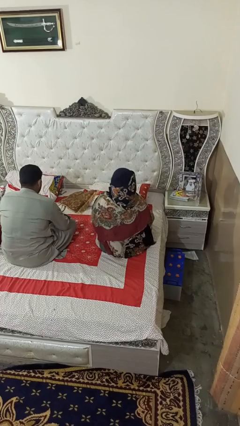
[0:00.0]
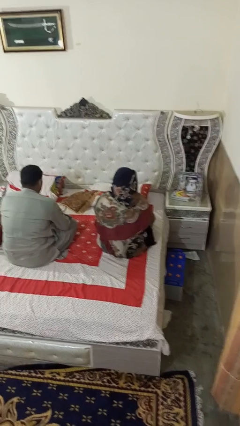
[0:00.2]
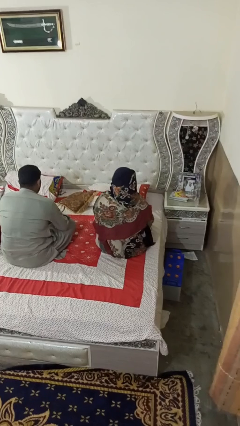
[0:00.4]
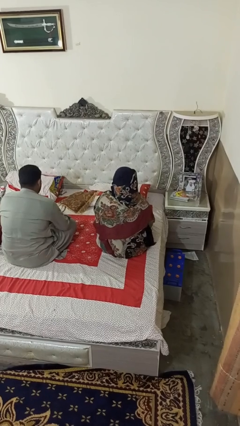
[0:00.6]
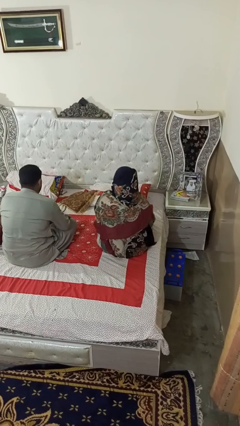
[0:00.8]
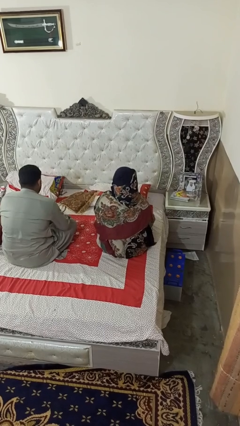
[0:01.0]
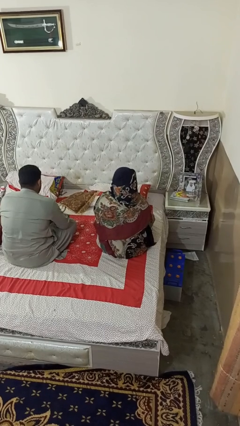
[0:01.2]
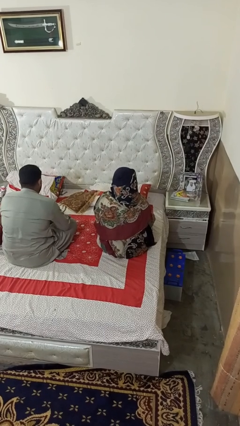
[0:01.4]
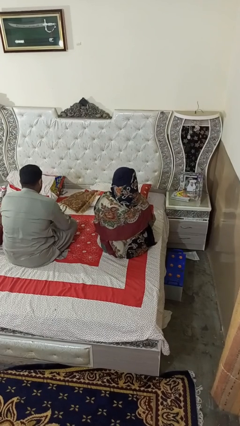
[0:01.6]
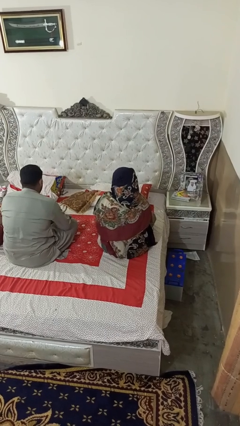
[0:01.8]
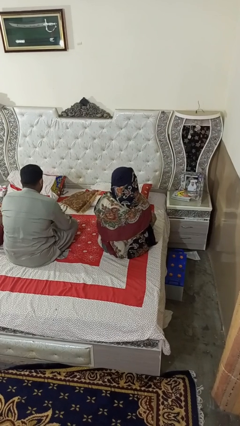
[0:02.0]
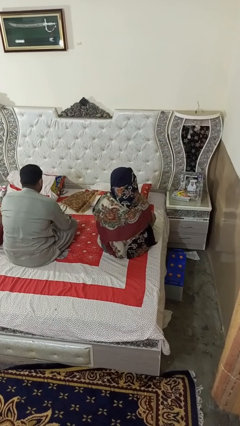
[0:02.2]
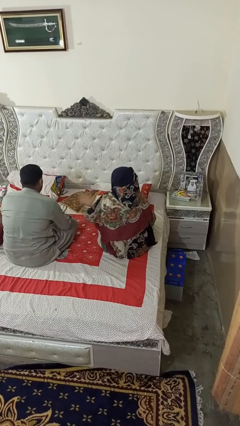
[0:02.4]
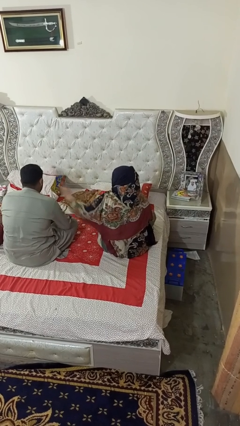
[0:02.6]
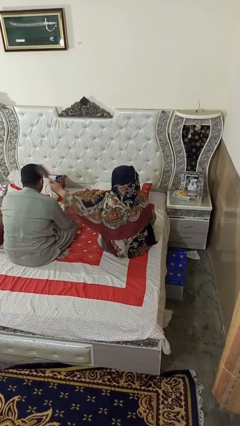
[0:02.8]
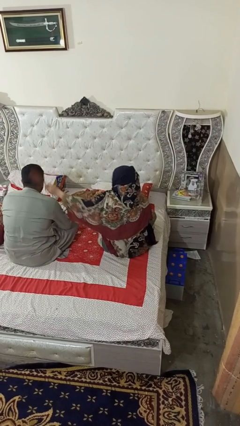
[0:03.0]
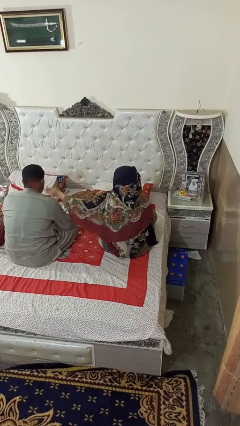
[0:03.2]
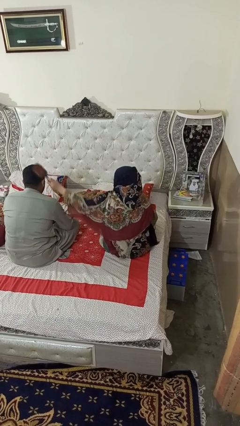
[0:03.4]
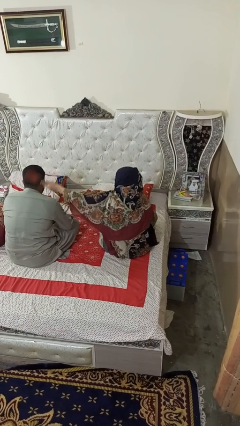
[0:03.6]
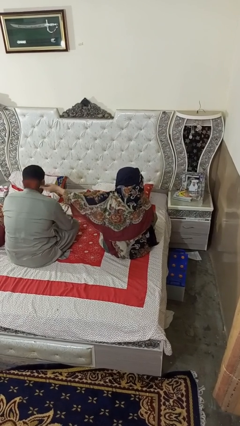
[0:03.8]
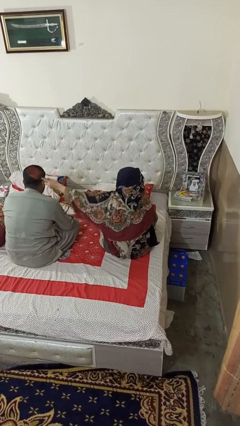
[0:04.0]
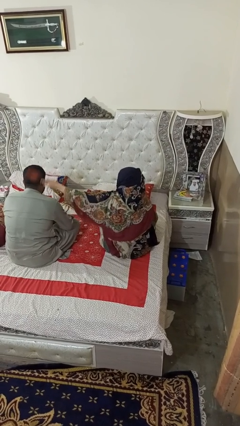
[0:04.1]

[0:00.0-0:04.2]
person brushes hair of person

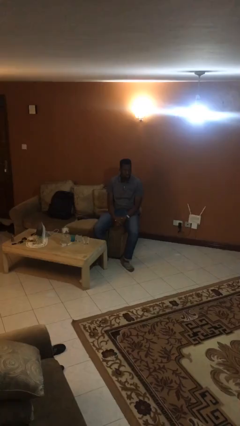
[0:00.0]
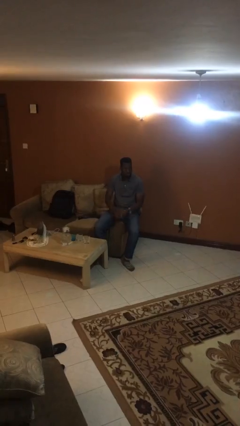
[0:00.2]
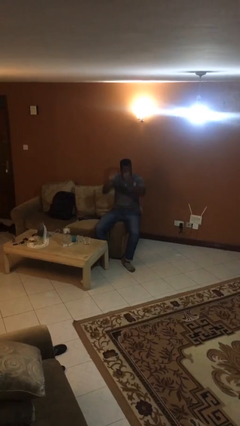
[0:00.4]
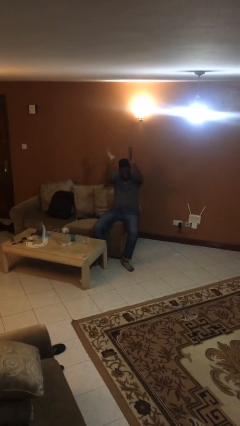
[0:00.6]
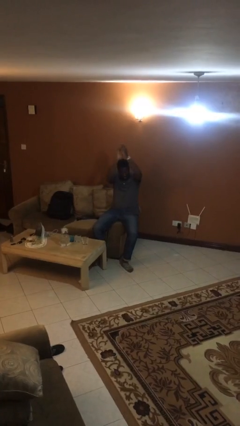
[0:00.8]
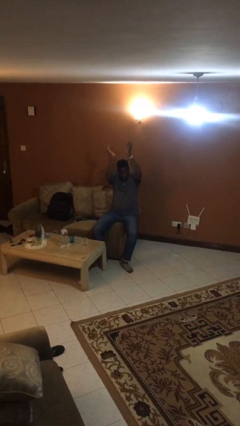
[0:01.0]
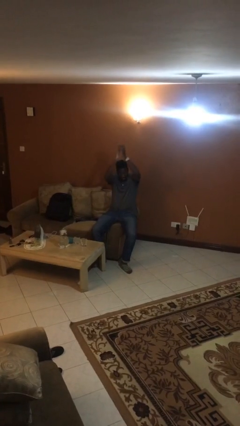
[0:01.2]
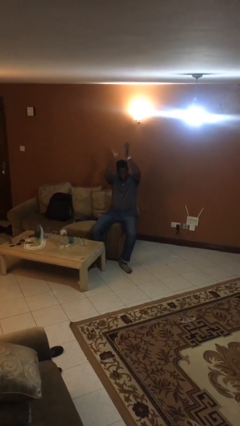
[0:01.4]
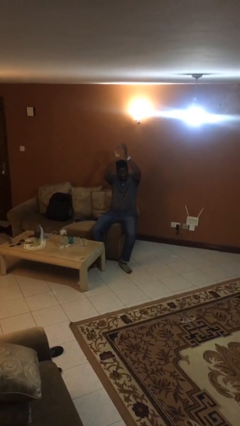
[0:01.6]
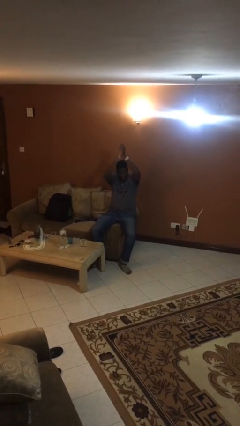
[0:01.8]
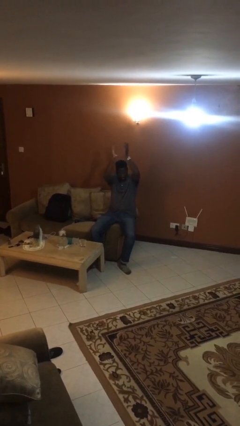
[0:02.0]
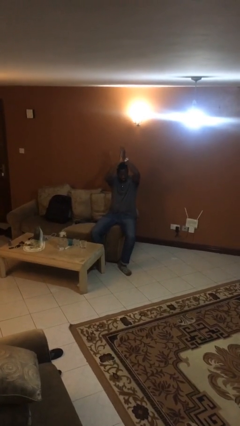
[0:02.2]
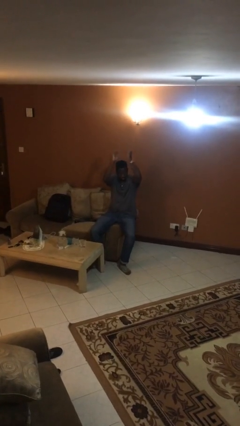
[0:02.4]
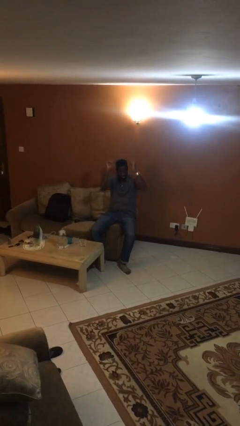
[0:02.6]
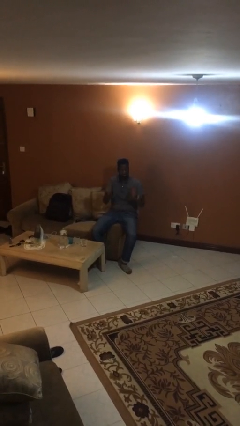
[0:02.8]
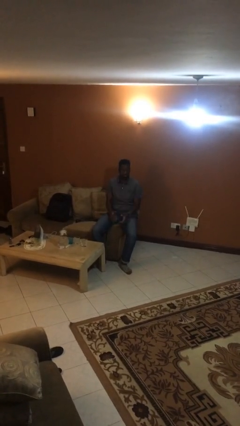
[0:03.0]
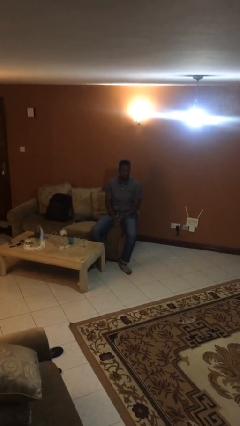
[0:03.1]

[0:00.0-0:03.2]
person claps hands

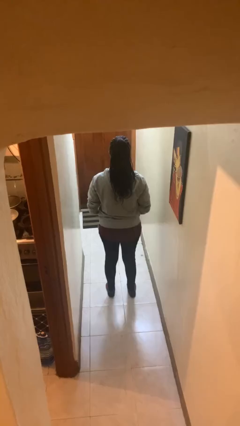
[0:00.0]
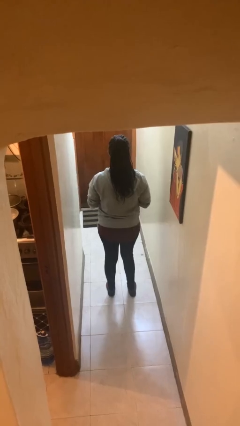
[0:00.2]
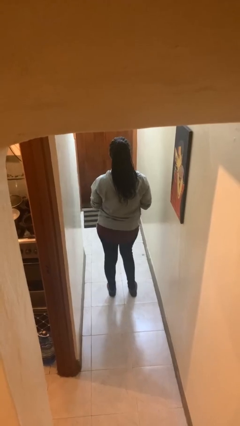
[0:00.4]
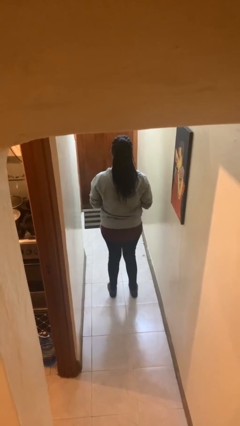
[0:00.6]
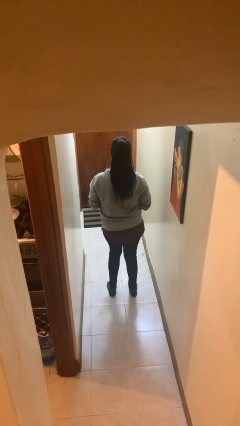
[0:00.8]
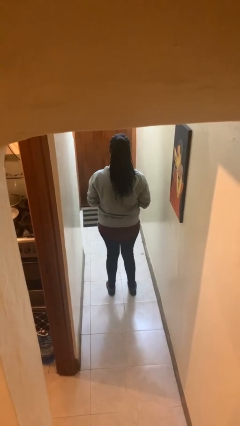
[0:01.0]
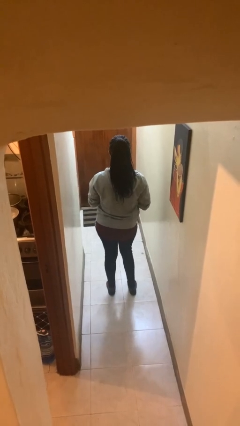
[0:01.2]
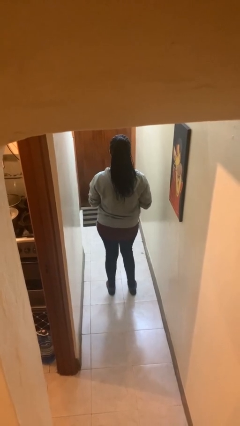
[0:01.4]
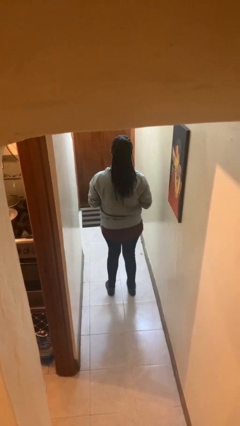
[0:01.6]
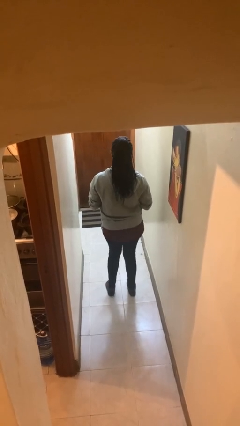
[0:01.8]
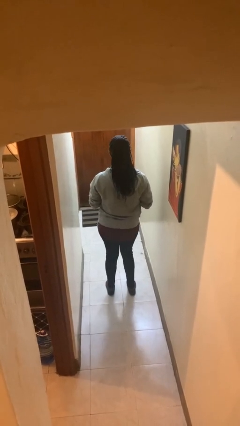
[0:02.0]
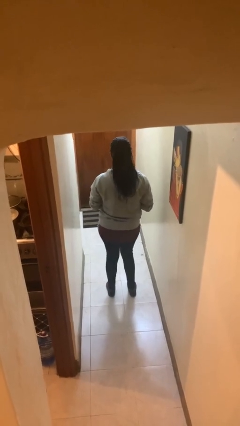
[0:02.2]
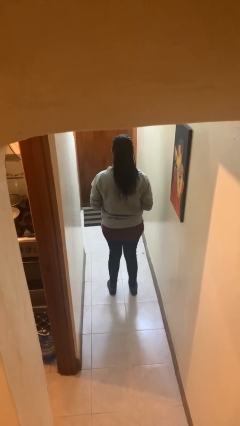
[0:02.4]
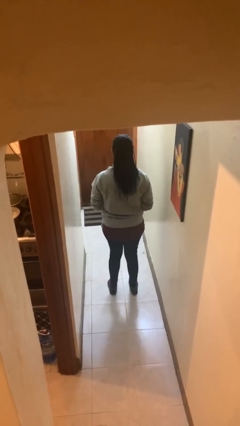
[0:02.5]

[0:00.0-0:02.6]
person wiggles hips

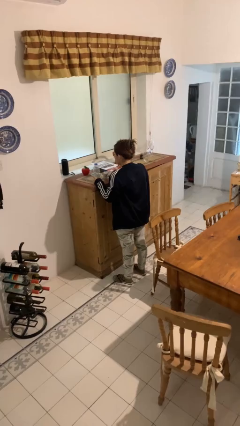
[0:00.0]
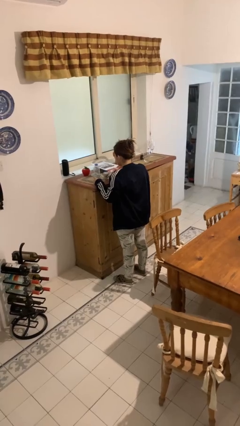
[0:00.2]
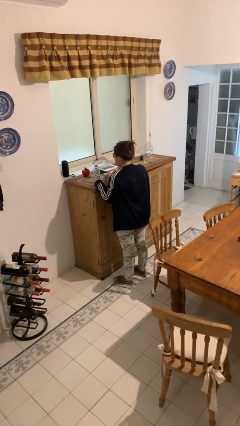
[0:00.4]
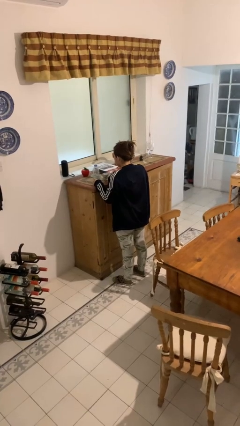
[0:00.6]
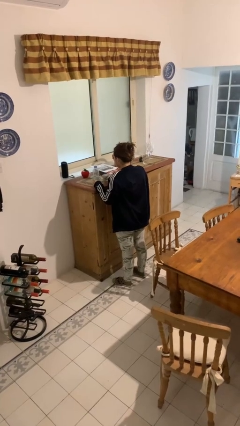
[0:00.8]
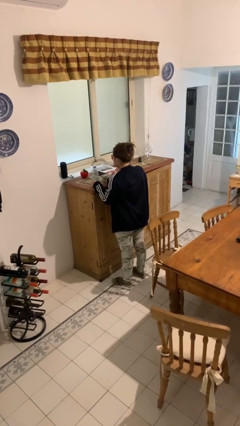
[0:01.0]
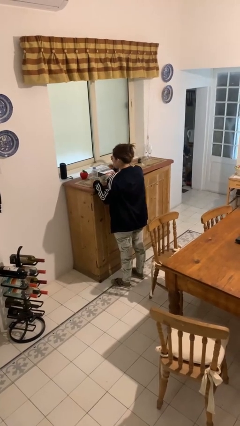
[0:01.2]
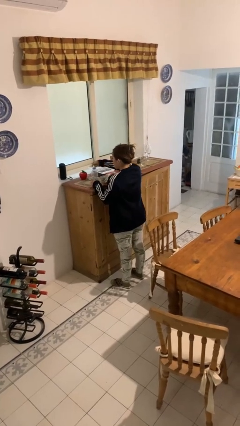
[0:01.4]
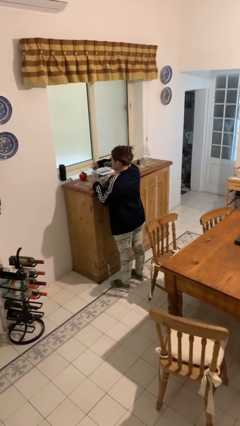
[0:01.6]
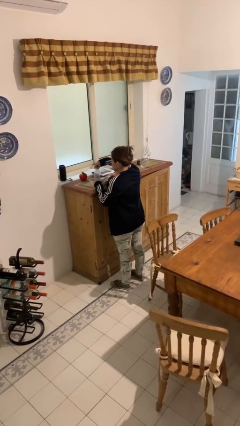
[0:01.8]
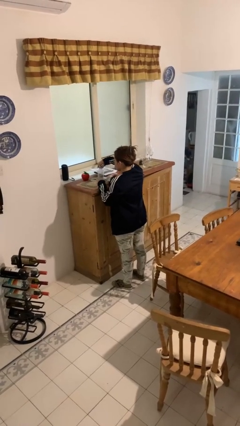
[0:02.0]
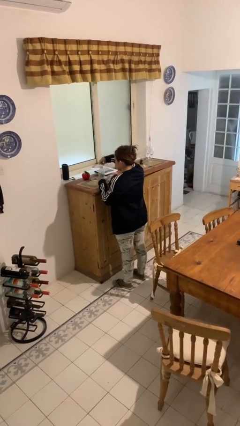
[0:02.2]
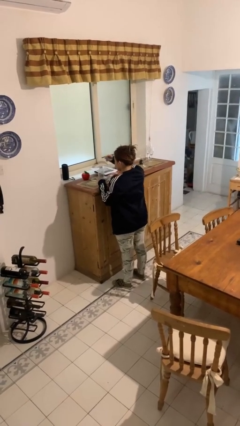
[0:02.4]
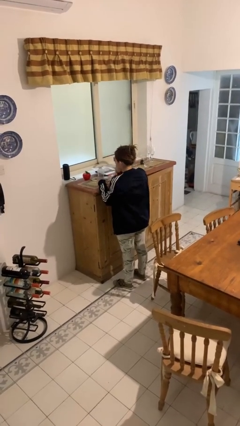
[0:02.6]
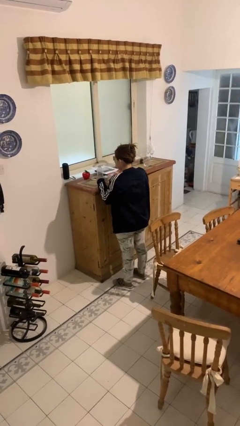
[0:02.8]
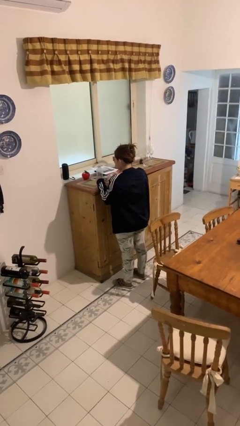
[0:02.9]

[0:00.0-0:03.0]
person unscrews lid from bottle

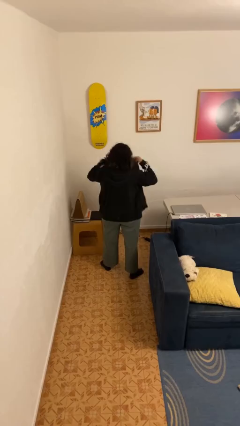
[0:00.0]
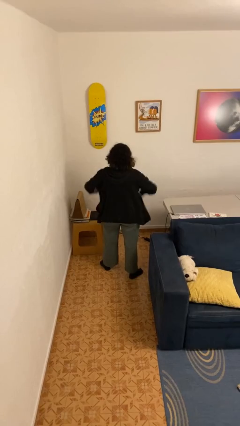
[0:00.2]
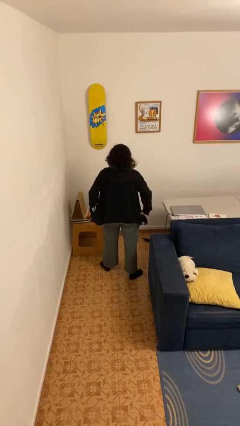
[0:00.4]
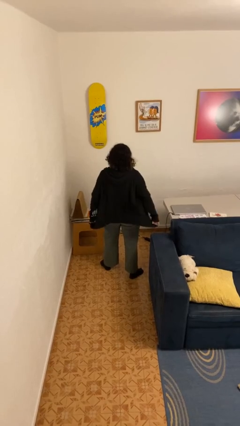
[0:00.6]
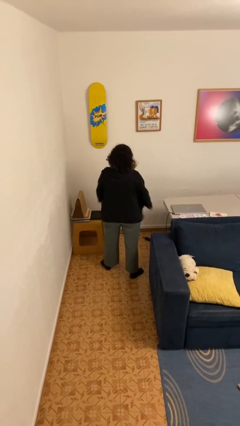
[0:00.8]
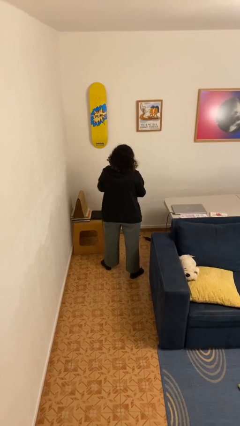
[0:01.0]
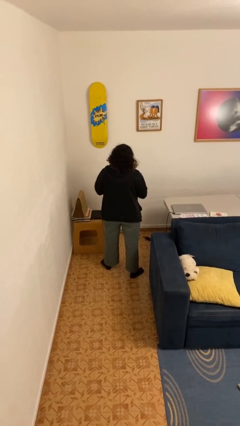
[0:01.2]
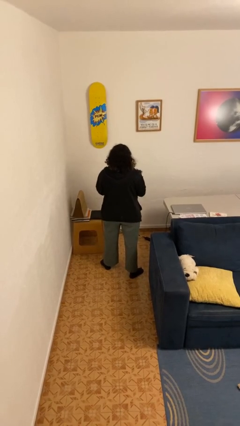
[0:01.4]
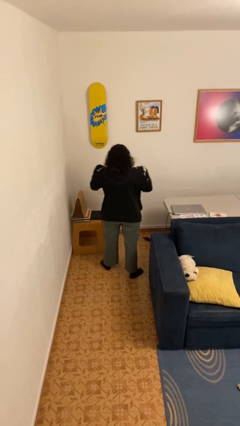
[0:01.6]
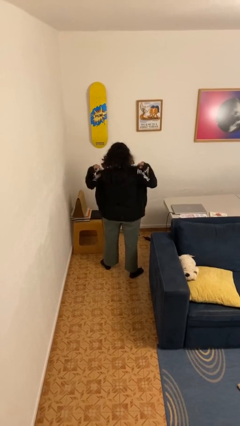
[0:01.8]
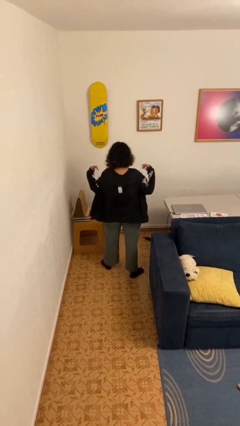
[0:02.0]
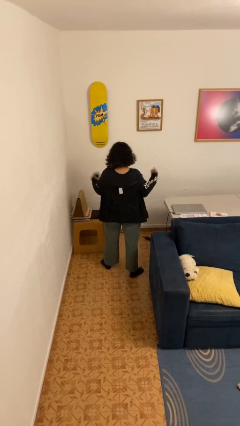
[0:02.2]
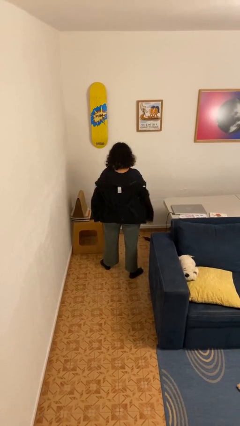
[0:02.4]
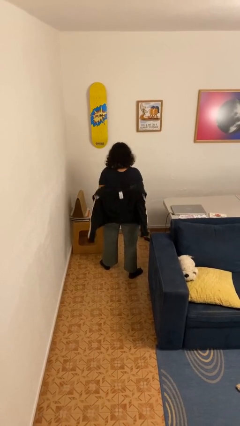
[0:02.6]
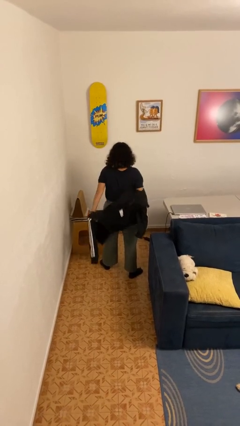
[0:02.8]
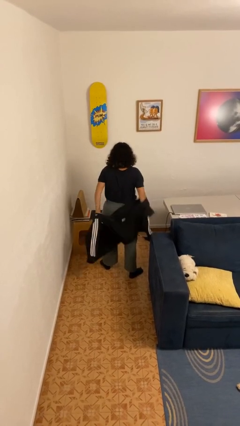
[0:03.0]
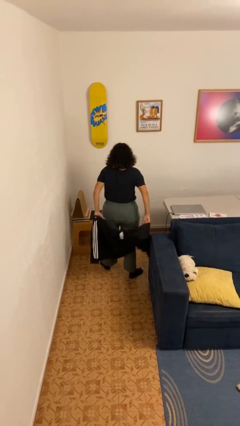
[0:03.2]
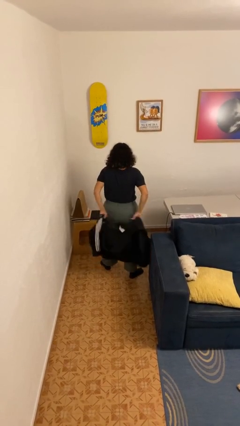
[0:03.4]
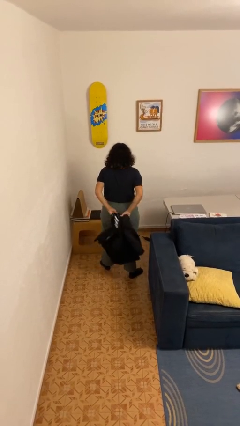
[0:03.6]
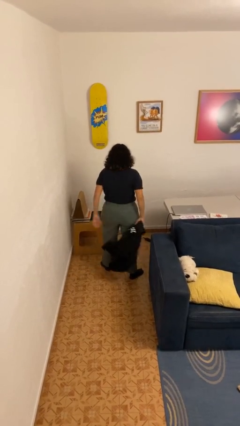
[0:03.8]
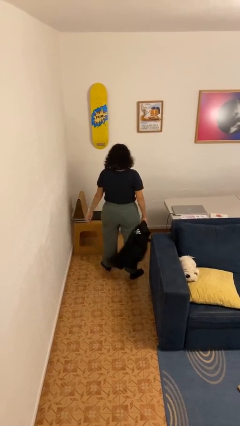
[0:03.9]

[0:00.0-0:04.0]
person takes off hoodie

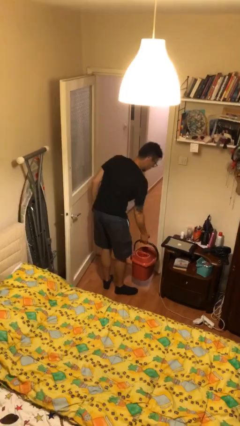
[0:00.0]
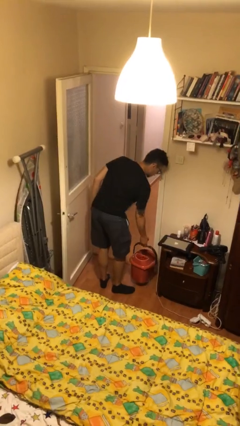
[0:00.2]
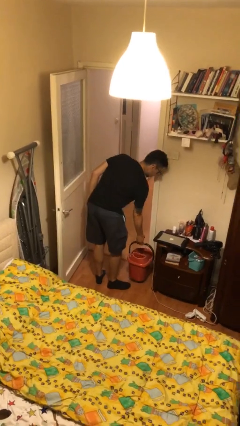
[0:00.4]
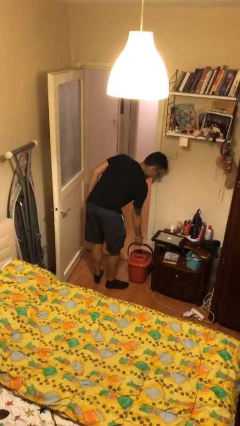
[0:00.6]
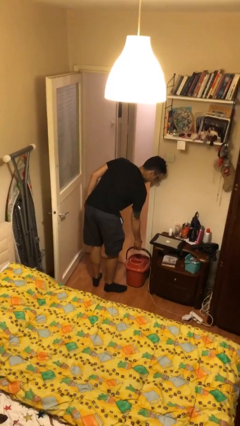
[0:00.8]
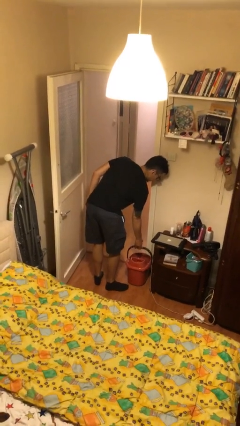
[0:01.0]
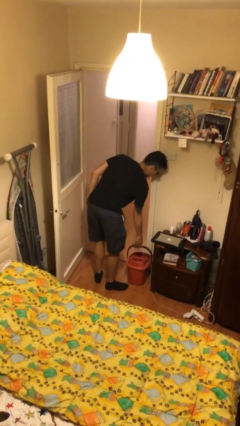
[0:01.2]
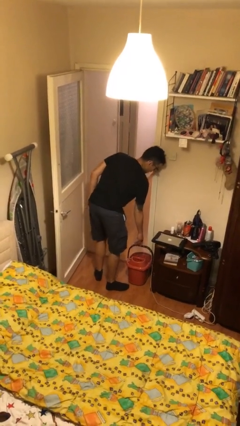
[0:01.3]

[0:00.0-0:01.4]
person puts down object on floor
